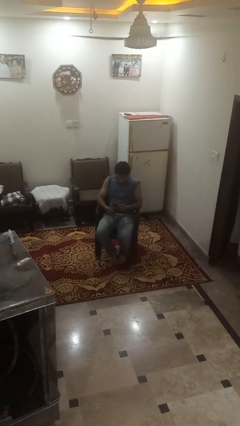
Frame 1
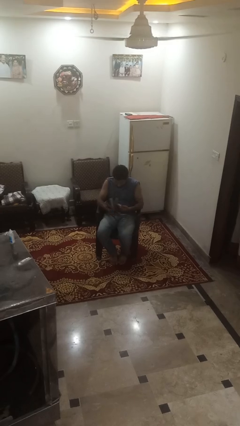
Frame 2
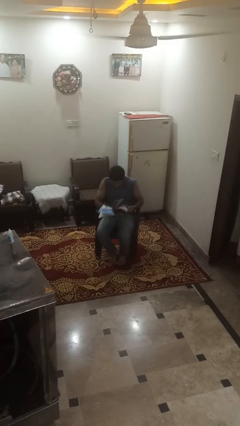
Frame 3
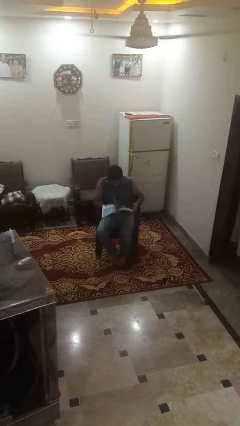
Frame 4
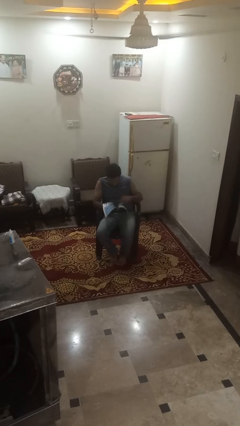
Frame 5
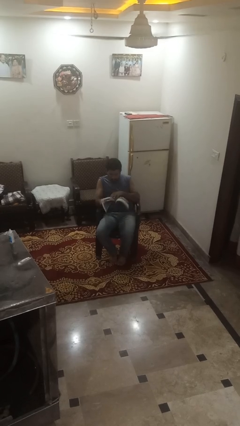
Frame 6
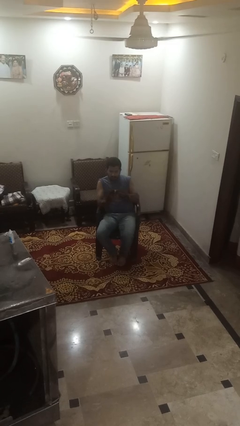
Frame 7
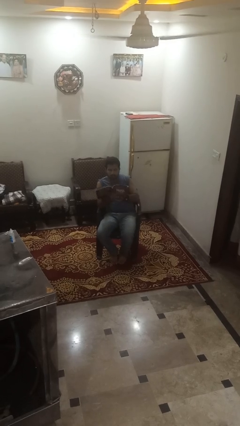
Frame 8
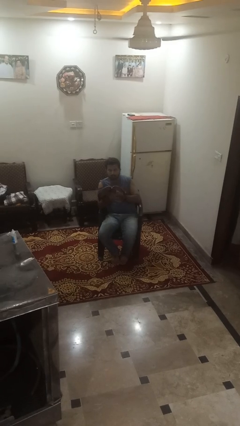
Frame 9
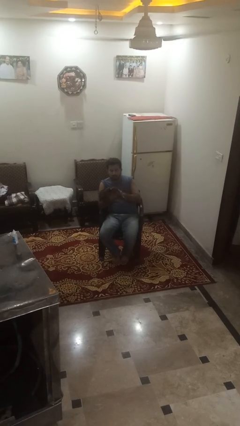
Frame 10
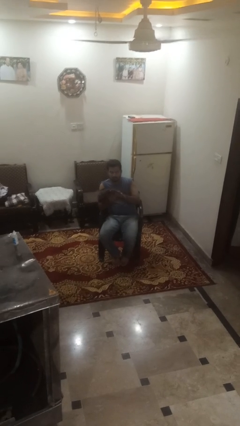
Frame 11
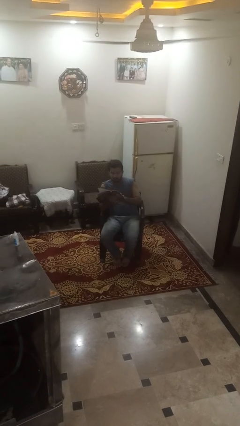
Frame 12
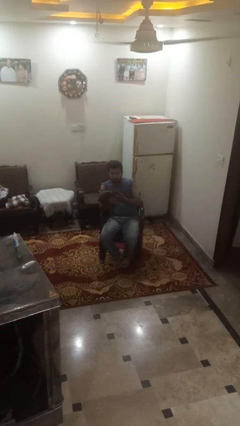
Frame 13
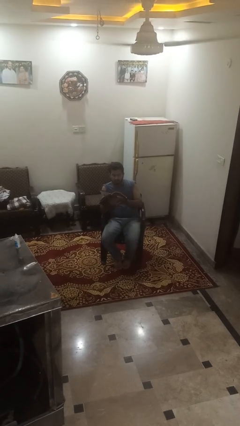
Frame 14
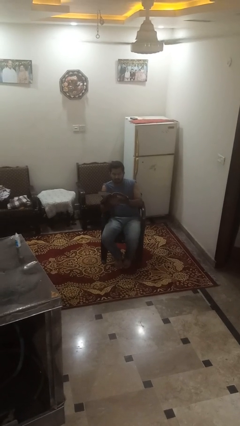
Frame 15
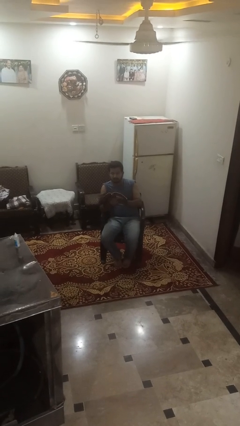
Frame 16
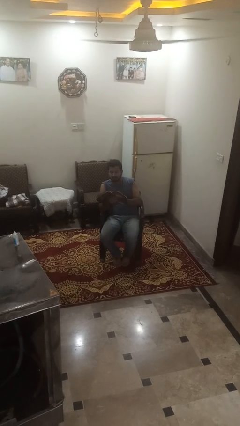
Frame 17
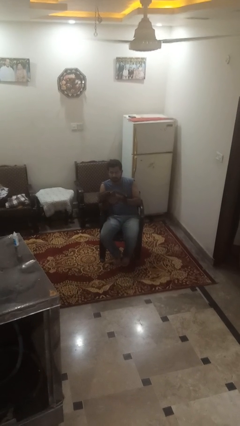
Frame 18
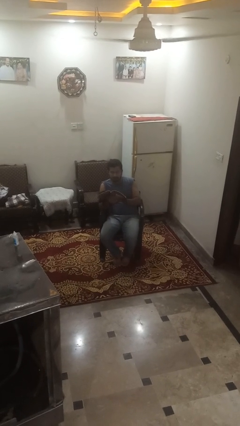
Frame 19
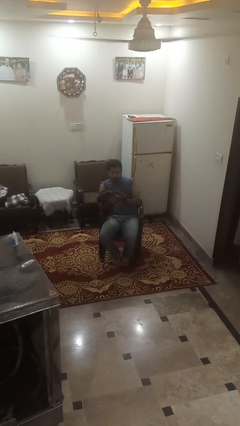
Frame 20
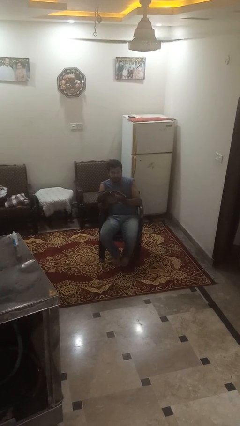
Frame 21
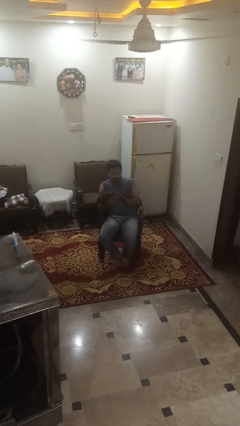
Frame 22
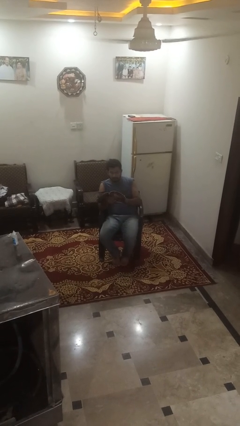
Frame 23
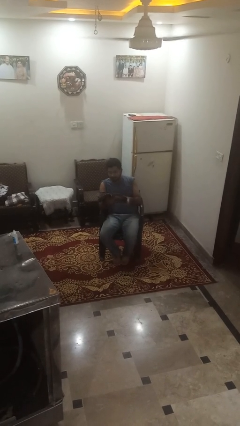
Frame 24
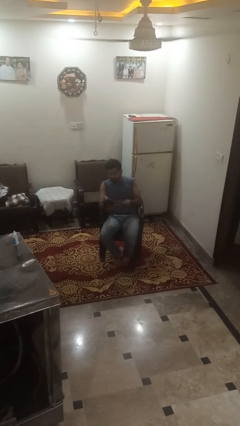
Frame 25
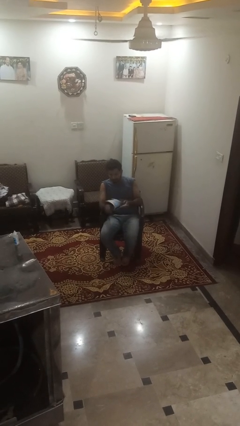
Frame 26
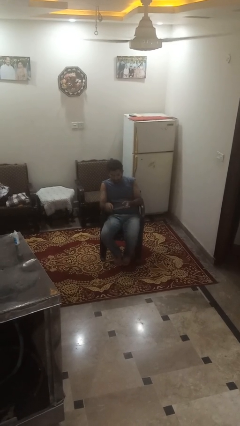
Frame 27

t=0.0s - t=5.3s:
person reads magazine

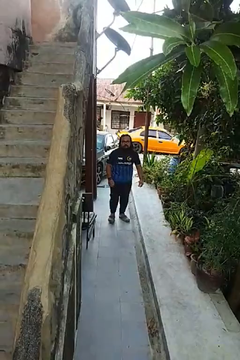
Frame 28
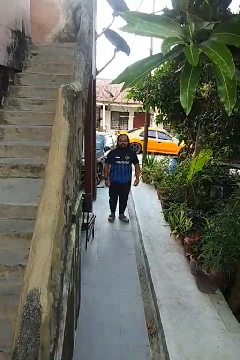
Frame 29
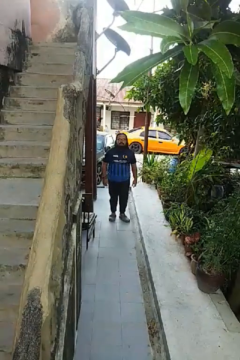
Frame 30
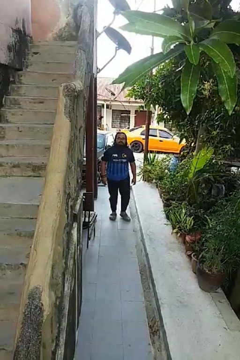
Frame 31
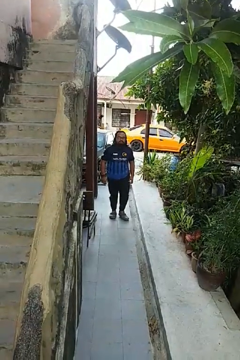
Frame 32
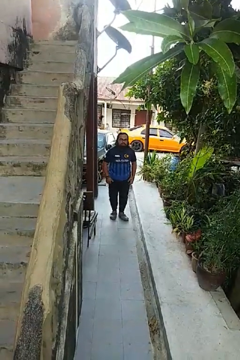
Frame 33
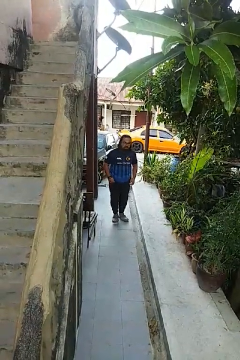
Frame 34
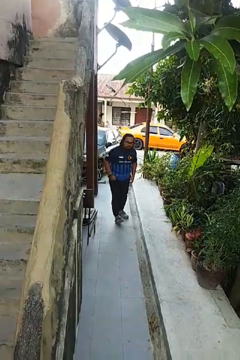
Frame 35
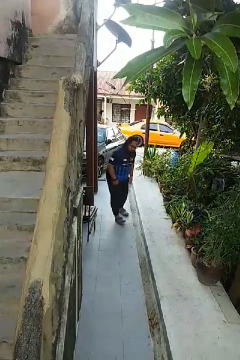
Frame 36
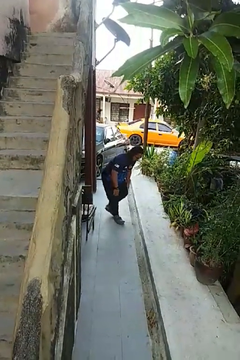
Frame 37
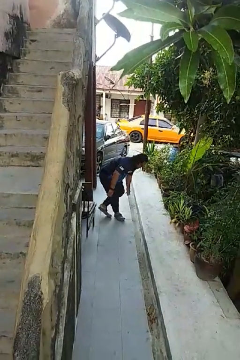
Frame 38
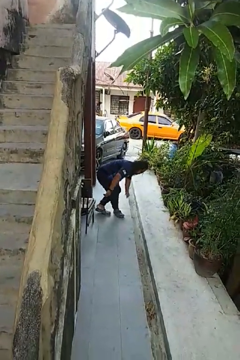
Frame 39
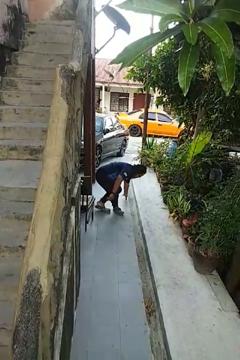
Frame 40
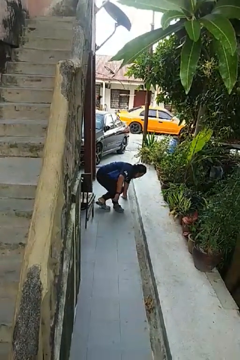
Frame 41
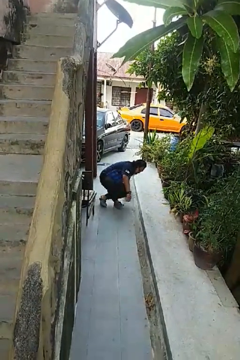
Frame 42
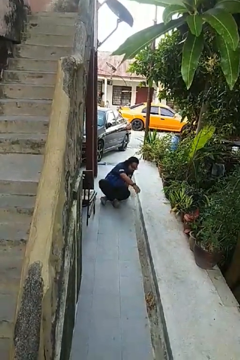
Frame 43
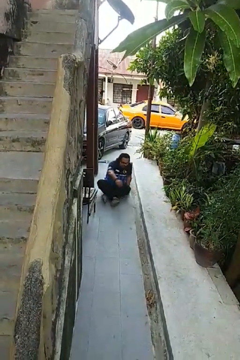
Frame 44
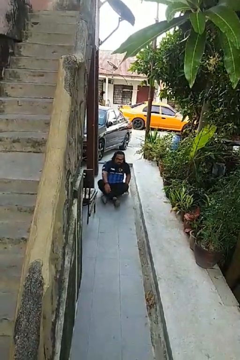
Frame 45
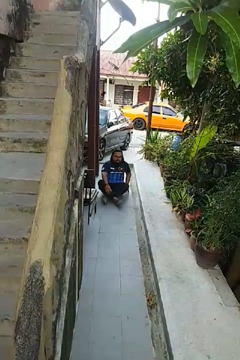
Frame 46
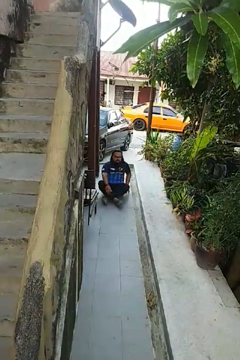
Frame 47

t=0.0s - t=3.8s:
person sits crisscross

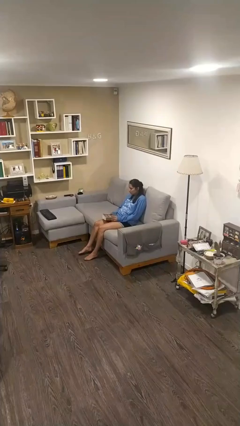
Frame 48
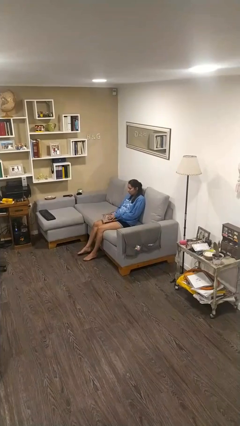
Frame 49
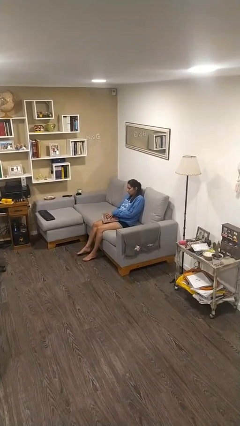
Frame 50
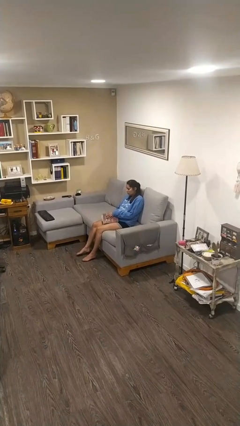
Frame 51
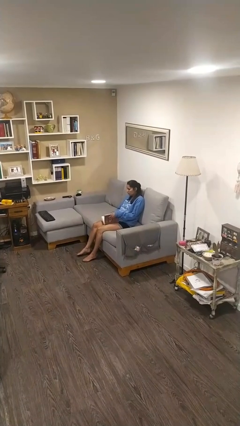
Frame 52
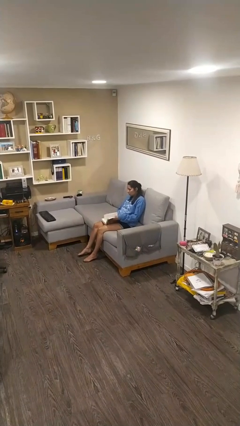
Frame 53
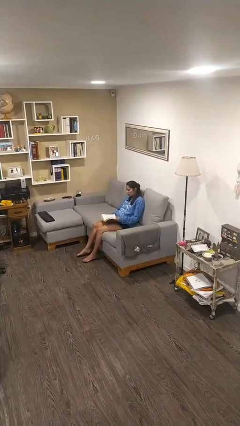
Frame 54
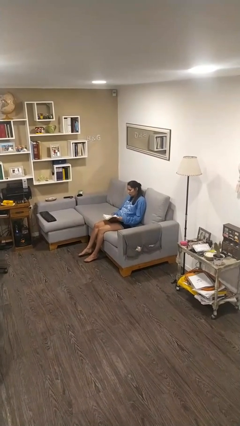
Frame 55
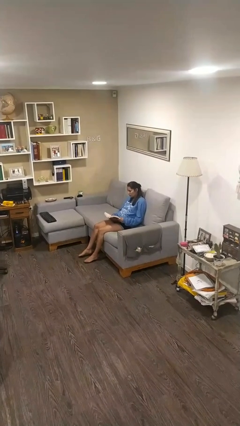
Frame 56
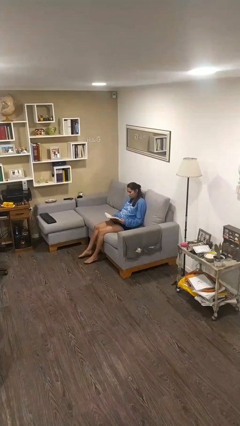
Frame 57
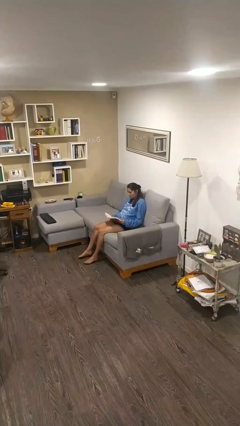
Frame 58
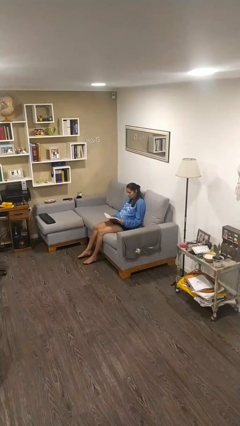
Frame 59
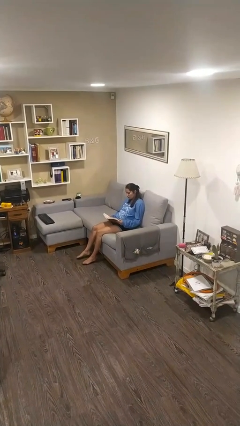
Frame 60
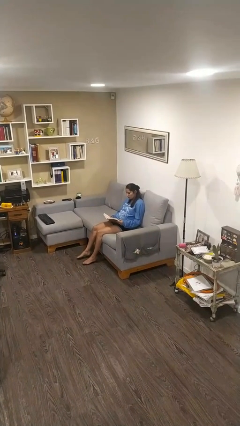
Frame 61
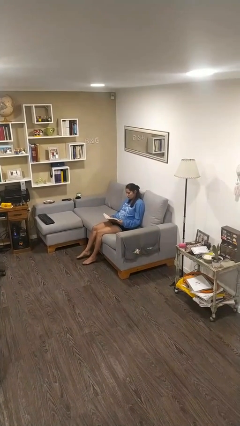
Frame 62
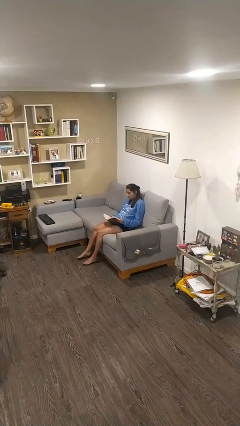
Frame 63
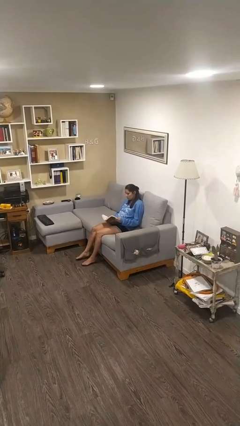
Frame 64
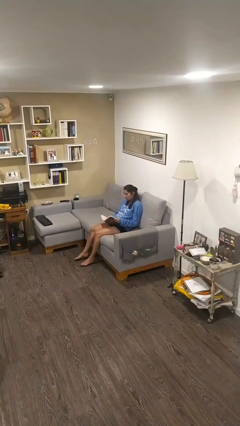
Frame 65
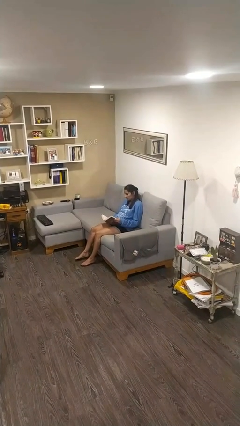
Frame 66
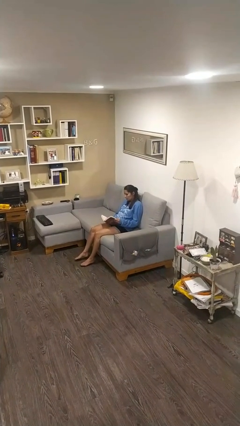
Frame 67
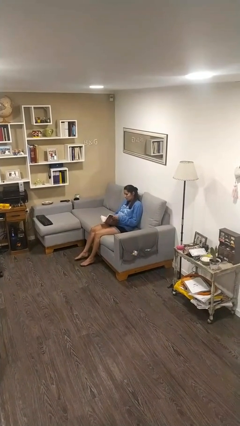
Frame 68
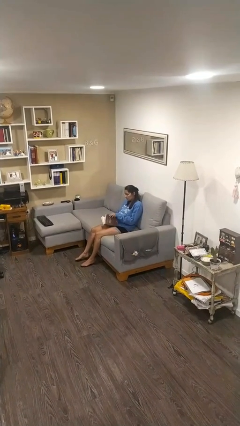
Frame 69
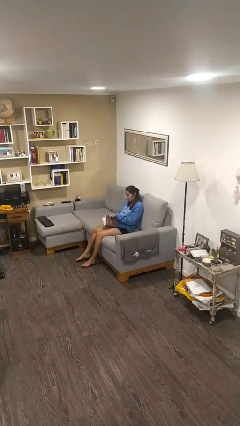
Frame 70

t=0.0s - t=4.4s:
person reads document

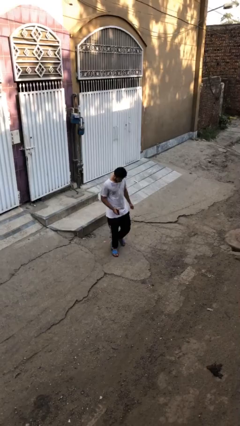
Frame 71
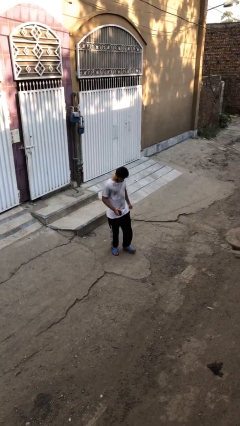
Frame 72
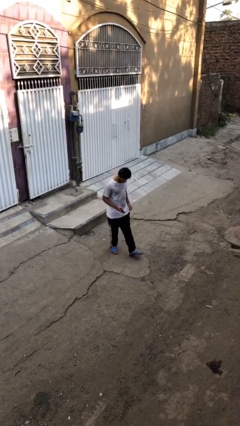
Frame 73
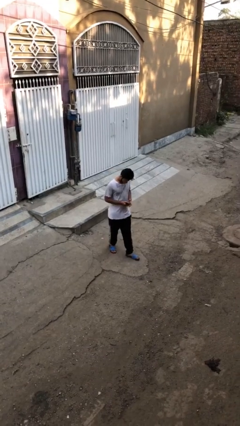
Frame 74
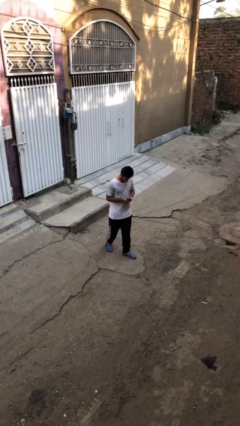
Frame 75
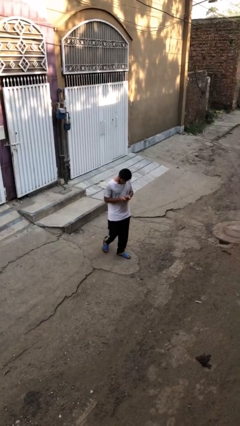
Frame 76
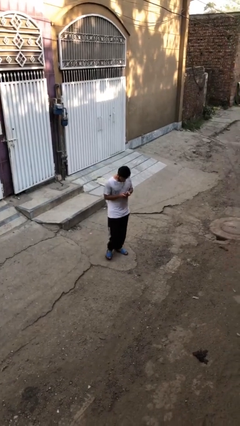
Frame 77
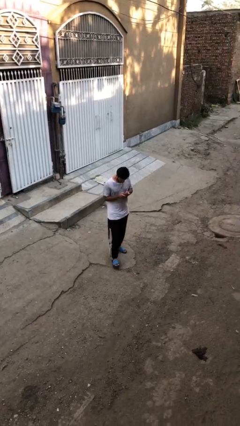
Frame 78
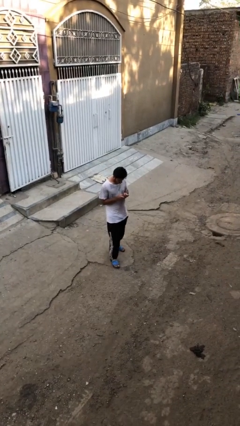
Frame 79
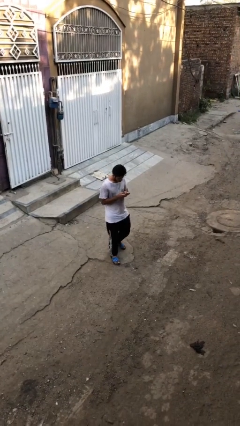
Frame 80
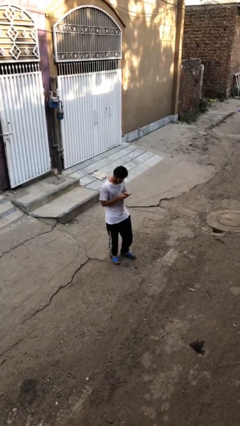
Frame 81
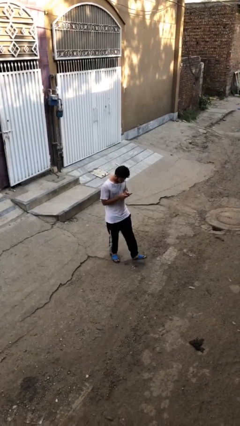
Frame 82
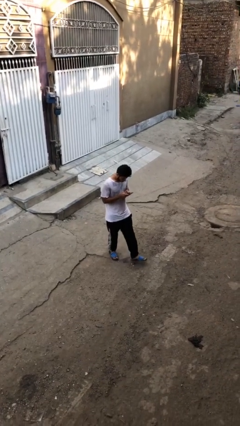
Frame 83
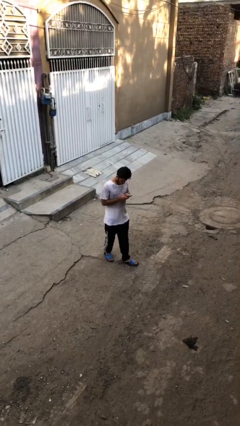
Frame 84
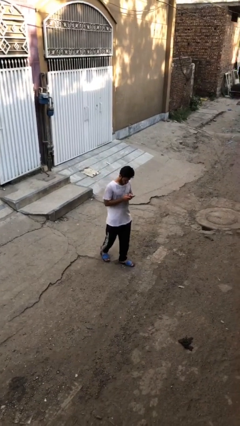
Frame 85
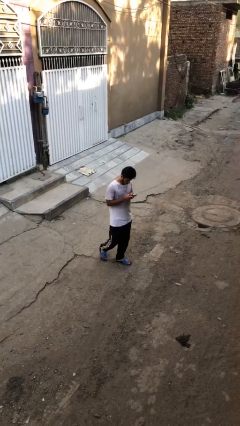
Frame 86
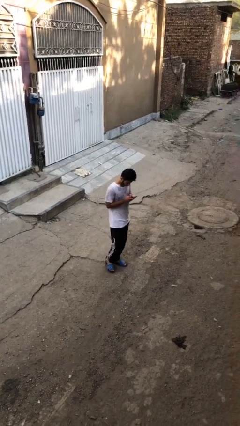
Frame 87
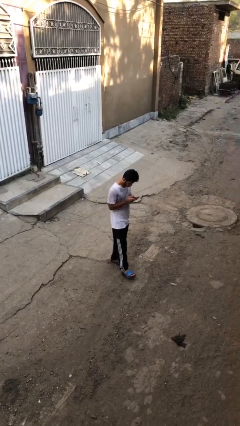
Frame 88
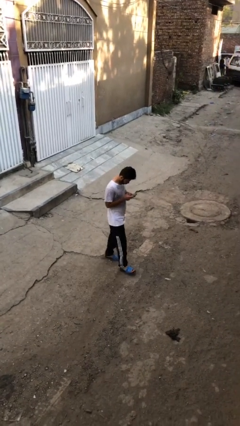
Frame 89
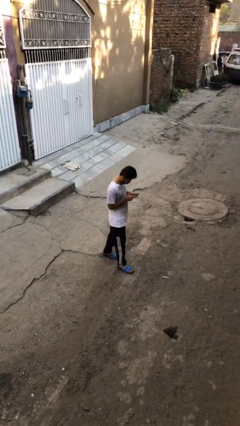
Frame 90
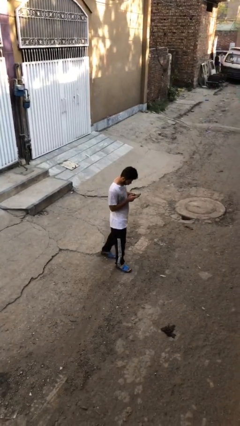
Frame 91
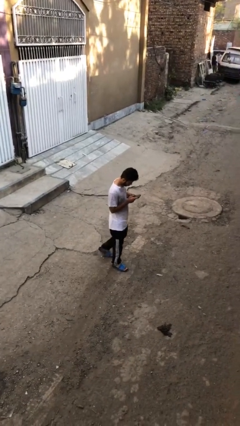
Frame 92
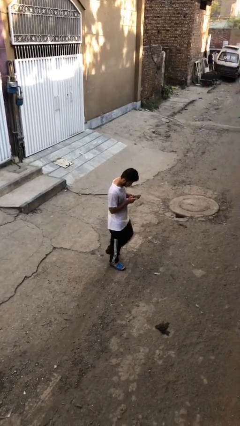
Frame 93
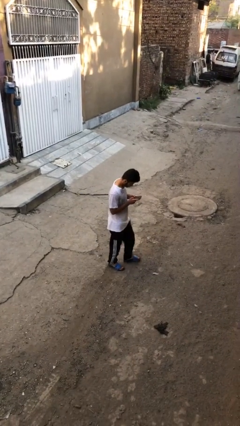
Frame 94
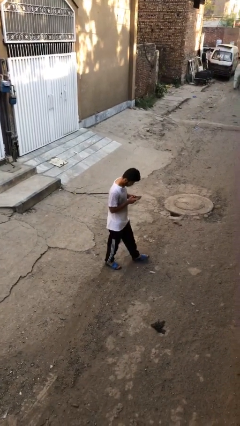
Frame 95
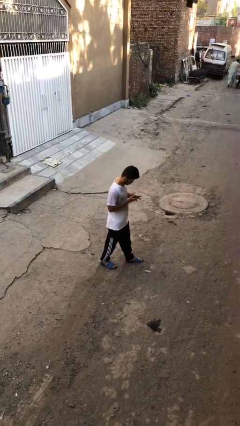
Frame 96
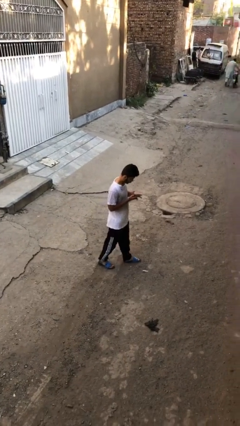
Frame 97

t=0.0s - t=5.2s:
person texts on phone
